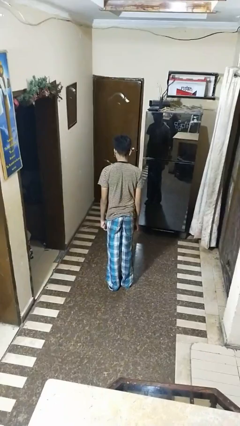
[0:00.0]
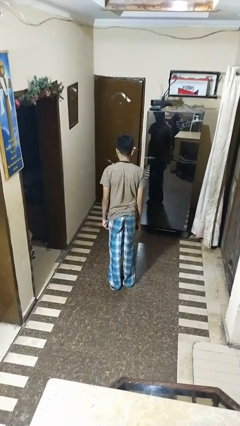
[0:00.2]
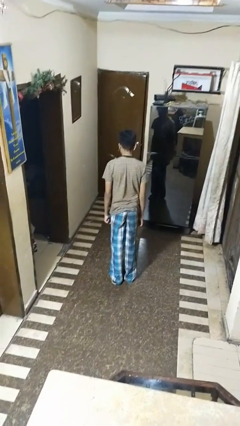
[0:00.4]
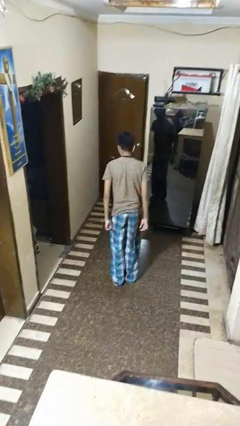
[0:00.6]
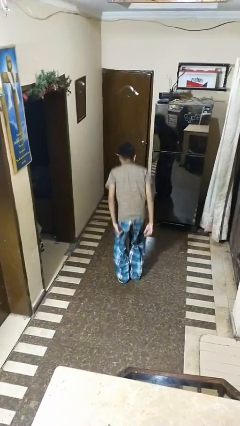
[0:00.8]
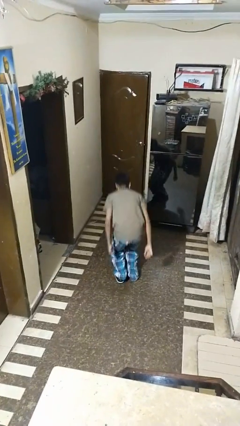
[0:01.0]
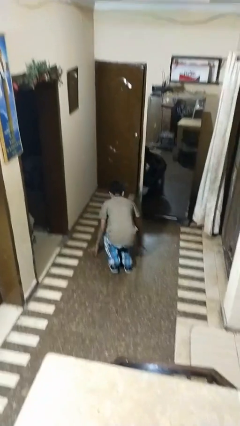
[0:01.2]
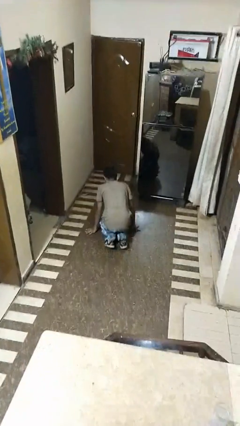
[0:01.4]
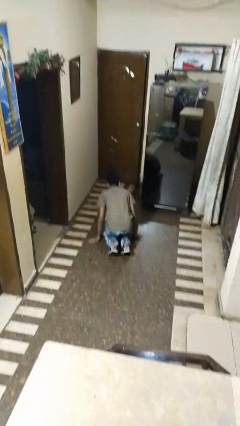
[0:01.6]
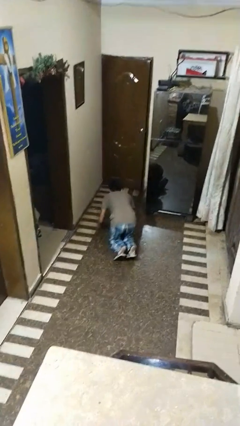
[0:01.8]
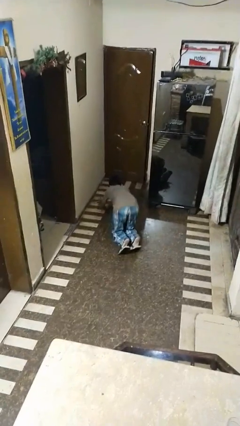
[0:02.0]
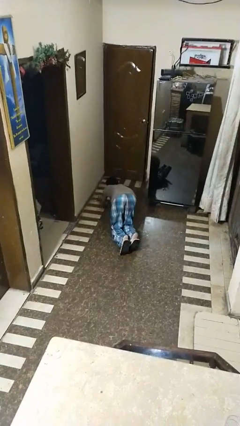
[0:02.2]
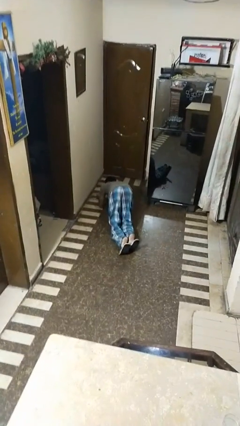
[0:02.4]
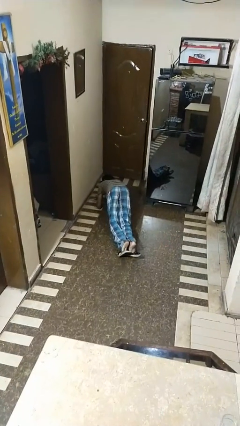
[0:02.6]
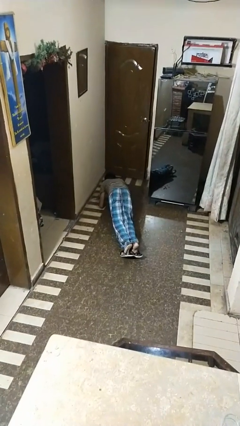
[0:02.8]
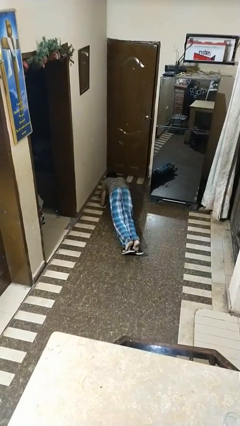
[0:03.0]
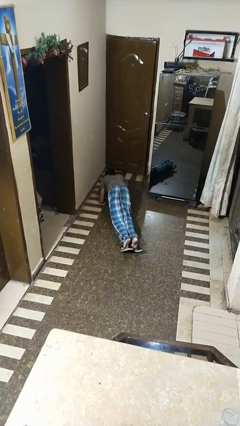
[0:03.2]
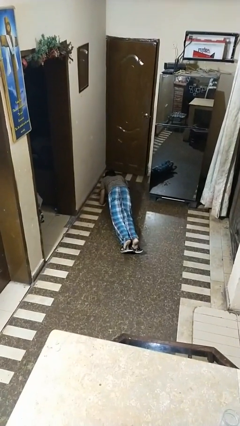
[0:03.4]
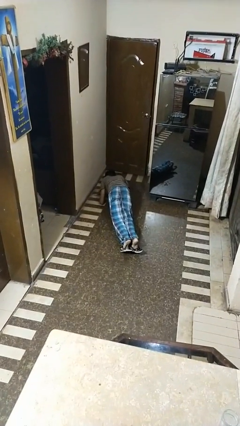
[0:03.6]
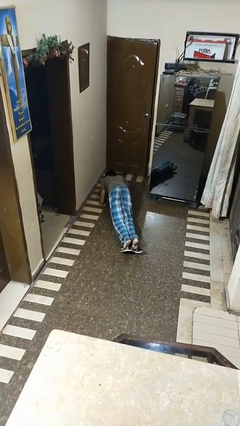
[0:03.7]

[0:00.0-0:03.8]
person exercises with plank

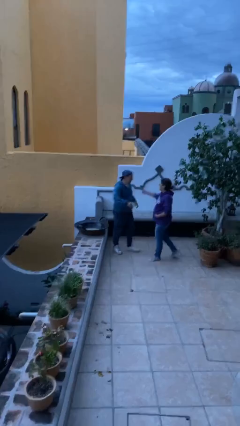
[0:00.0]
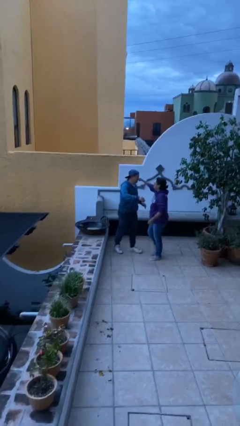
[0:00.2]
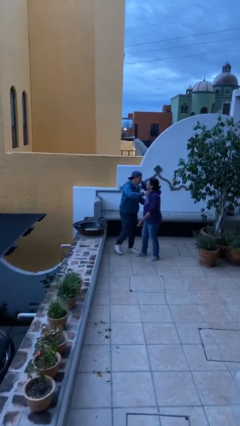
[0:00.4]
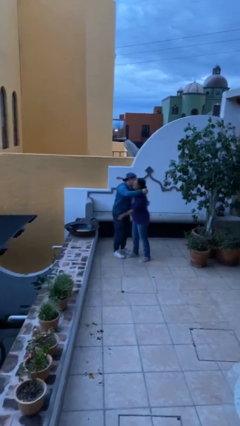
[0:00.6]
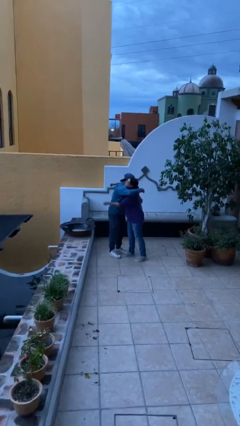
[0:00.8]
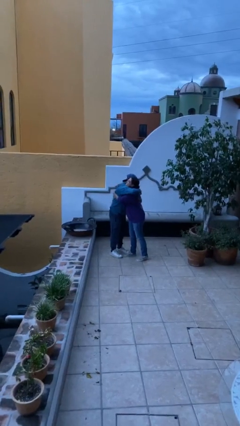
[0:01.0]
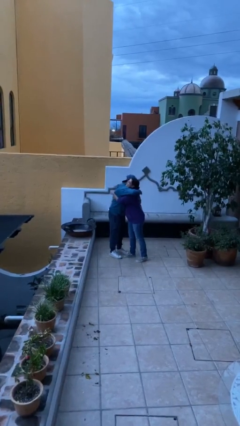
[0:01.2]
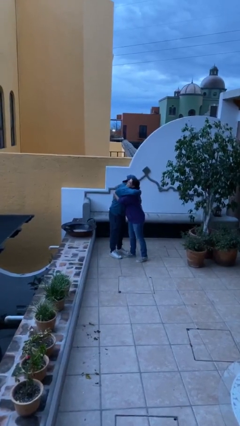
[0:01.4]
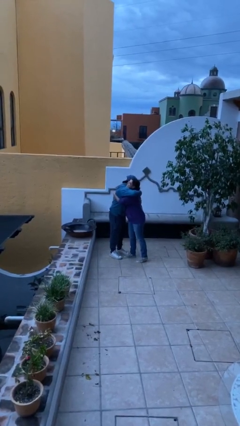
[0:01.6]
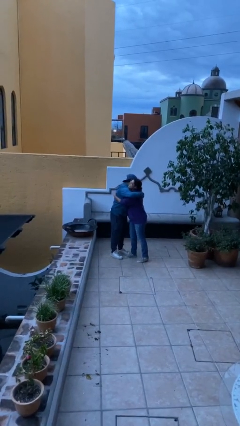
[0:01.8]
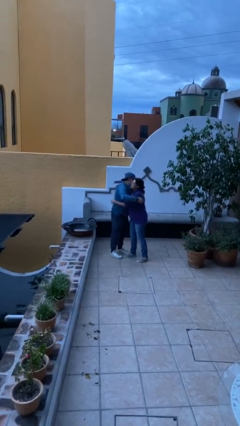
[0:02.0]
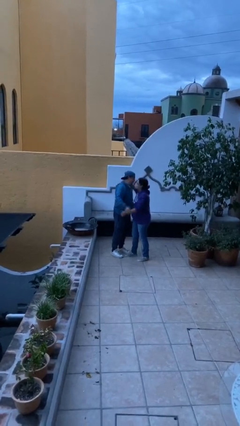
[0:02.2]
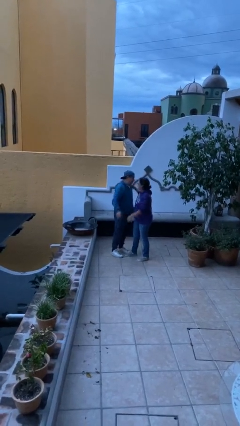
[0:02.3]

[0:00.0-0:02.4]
person embraces person

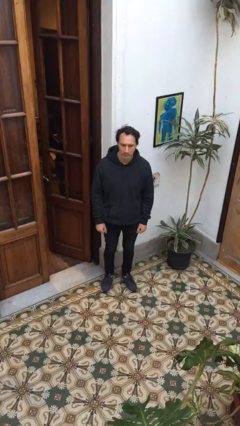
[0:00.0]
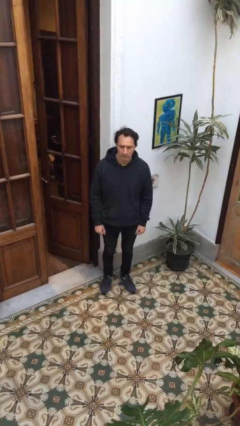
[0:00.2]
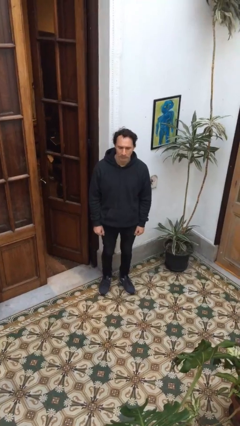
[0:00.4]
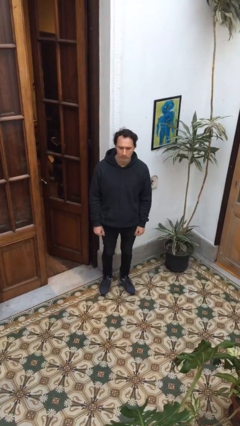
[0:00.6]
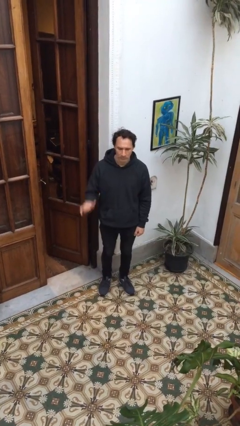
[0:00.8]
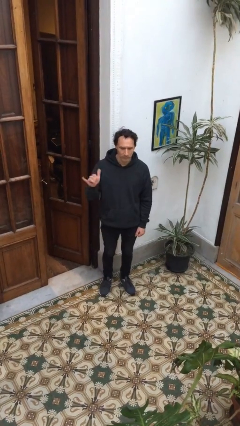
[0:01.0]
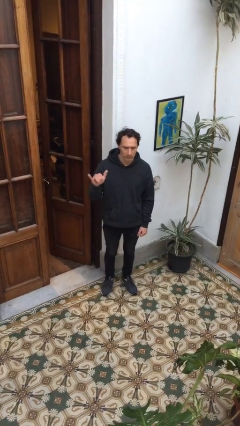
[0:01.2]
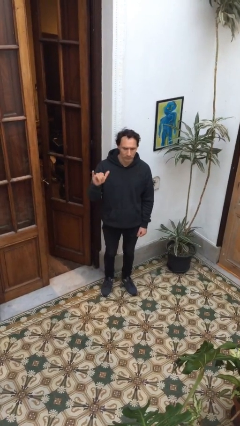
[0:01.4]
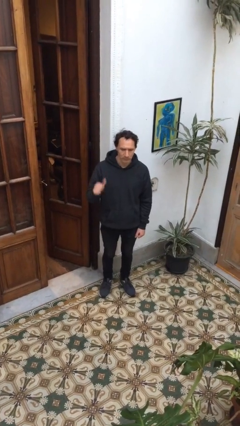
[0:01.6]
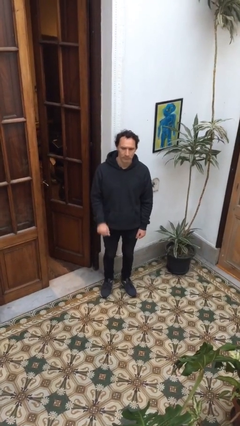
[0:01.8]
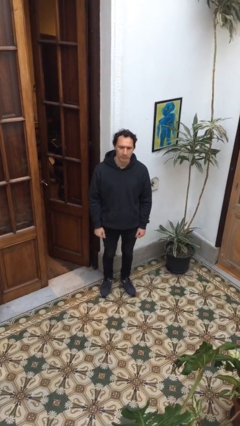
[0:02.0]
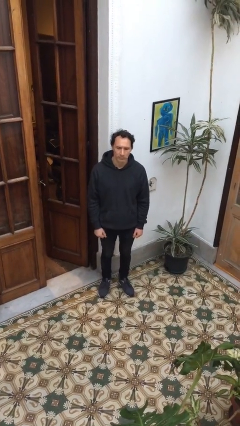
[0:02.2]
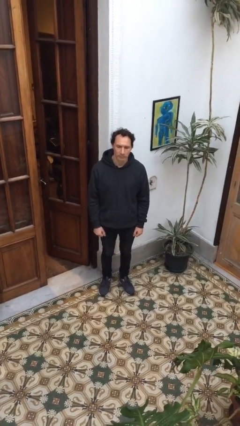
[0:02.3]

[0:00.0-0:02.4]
person gestures hang loose

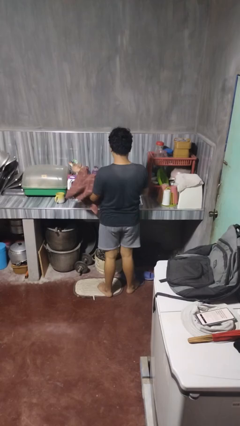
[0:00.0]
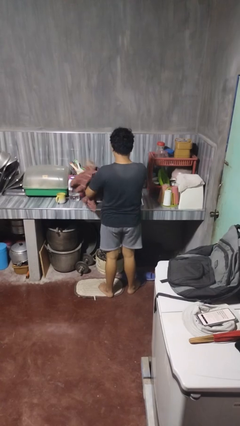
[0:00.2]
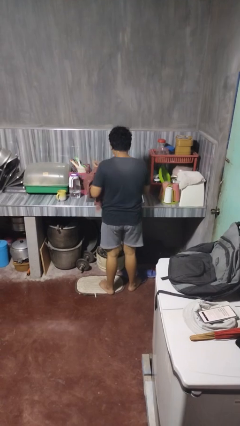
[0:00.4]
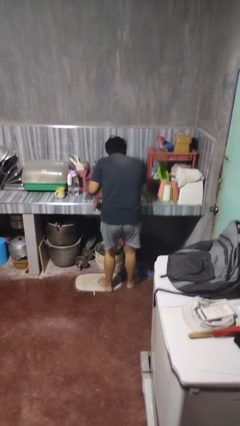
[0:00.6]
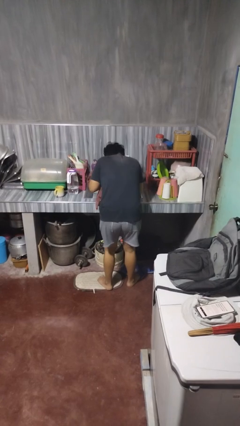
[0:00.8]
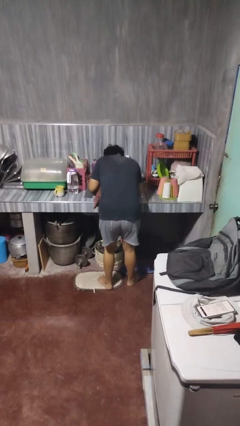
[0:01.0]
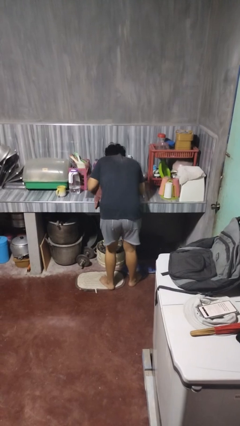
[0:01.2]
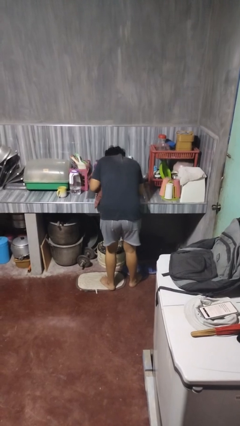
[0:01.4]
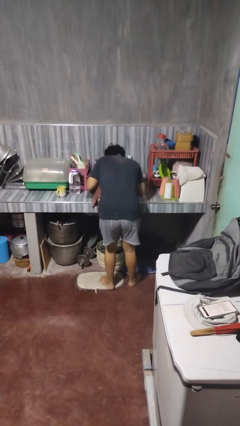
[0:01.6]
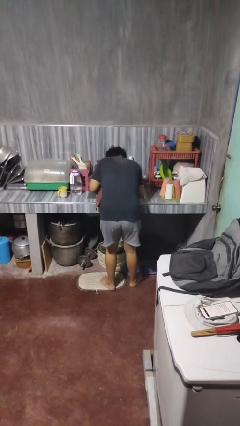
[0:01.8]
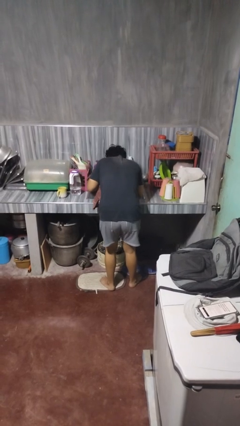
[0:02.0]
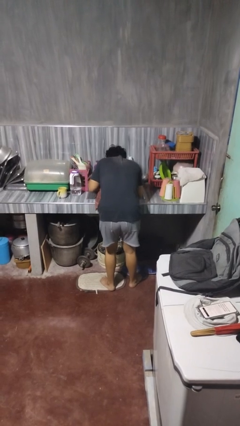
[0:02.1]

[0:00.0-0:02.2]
person washes face

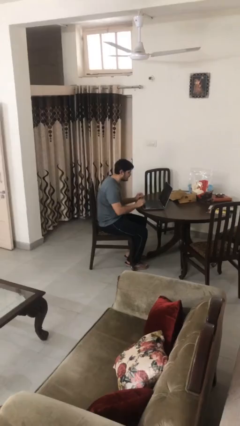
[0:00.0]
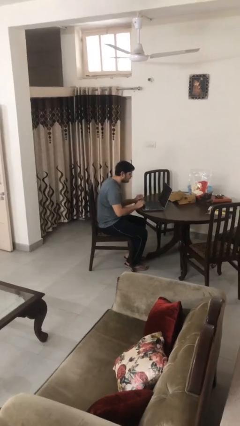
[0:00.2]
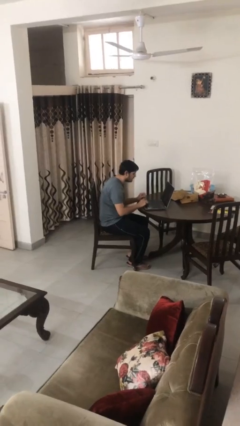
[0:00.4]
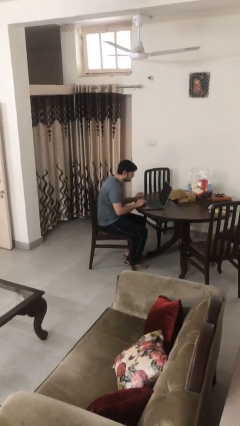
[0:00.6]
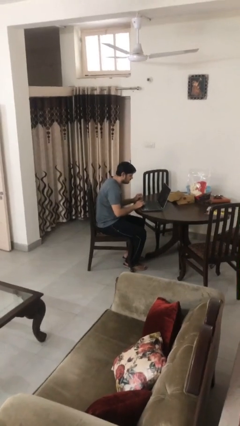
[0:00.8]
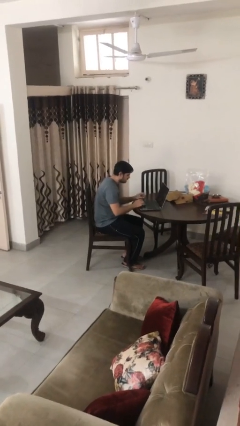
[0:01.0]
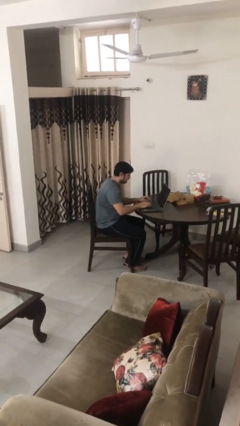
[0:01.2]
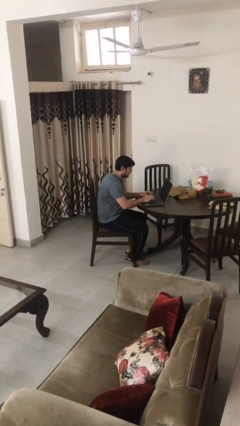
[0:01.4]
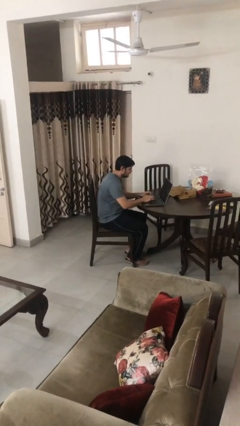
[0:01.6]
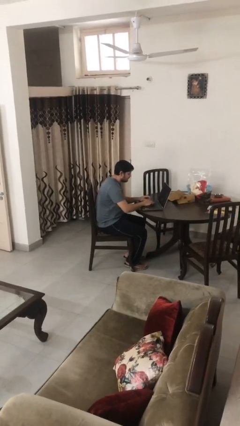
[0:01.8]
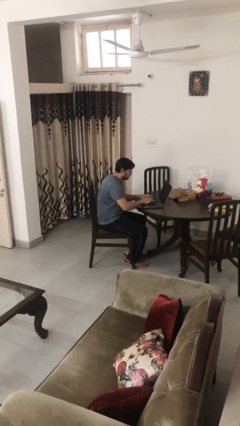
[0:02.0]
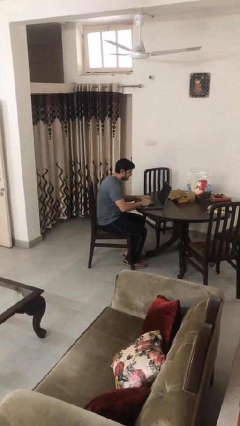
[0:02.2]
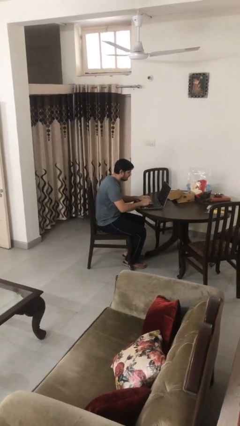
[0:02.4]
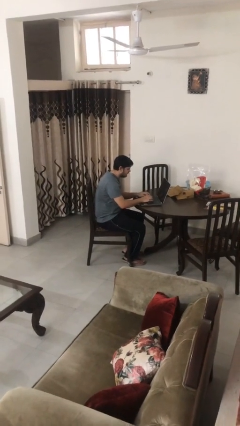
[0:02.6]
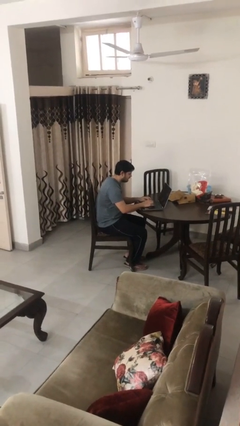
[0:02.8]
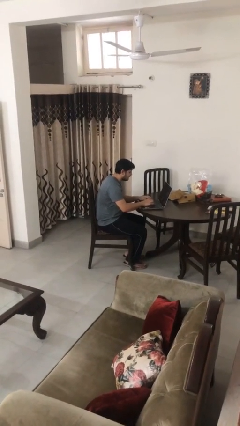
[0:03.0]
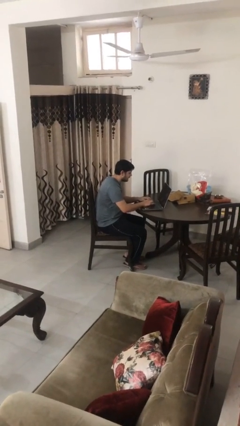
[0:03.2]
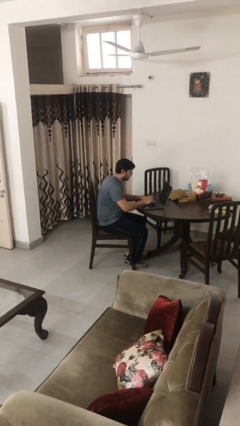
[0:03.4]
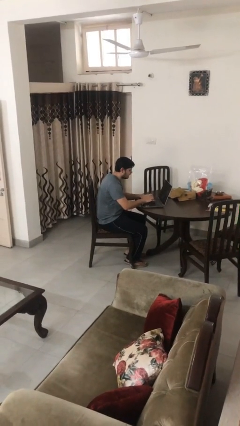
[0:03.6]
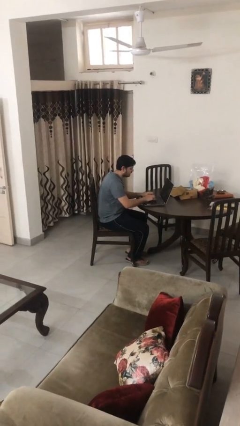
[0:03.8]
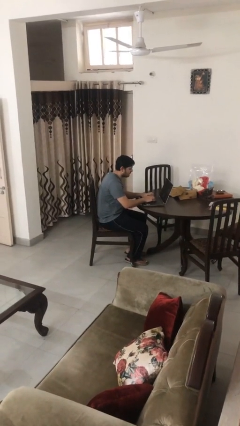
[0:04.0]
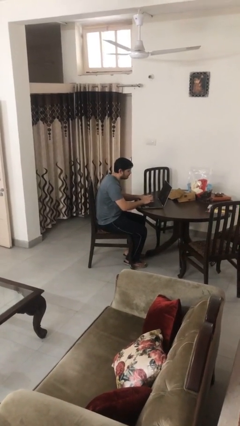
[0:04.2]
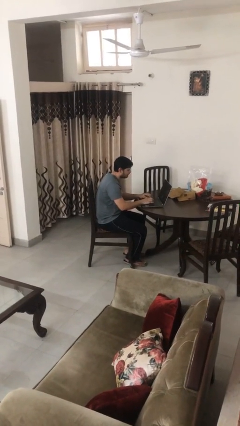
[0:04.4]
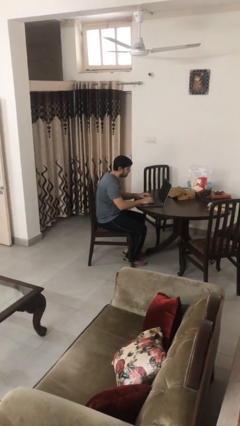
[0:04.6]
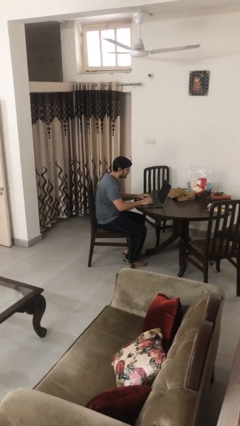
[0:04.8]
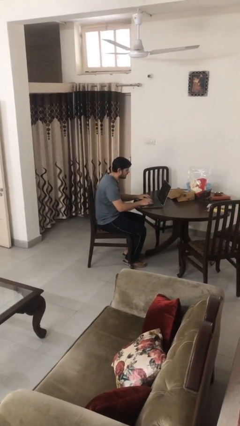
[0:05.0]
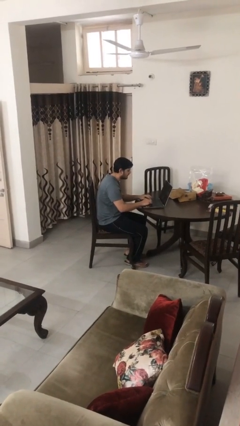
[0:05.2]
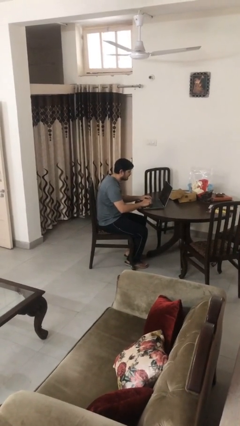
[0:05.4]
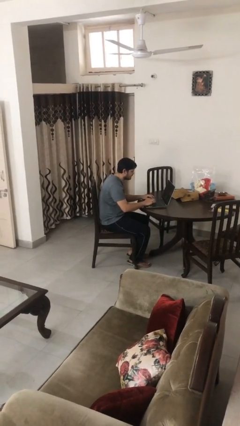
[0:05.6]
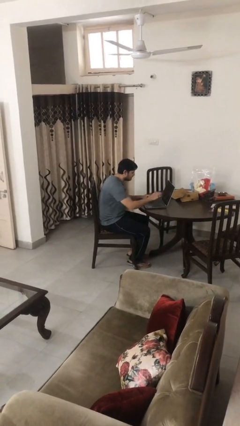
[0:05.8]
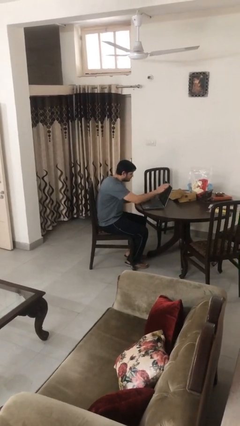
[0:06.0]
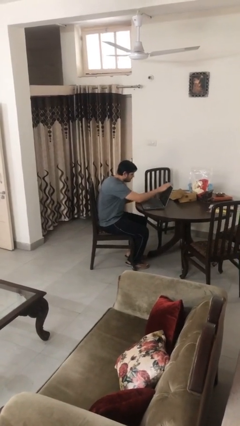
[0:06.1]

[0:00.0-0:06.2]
person interacts with laptop

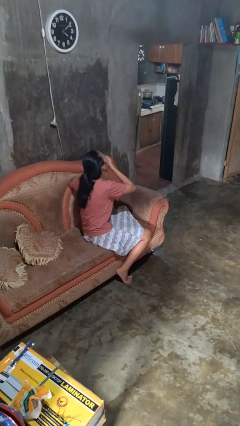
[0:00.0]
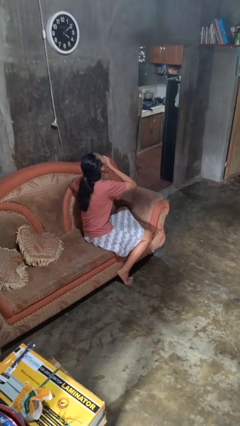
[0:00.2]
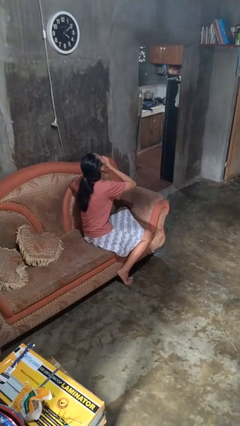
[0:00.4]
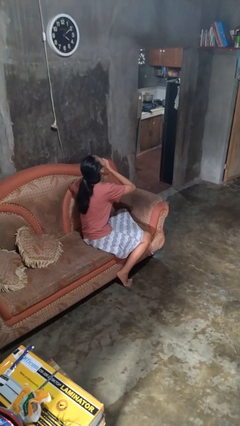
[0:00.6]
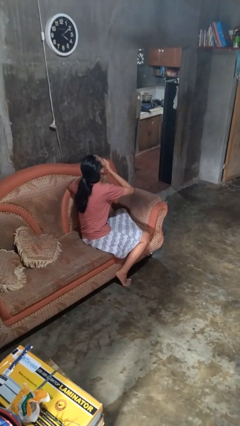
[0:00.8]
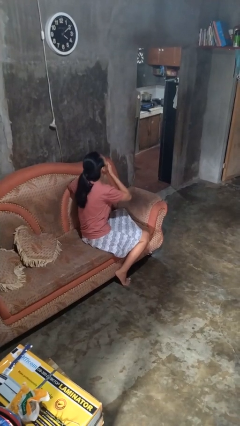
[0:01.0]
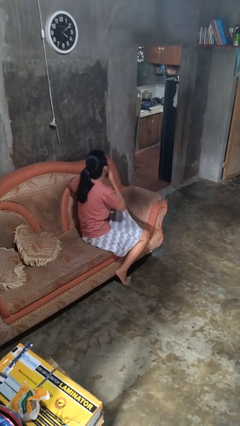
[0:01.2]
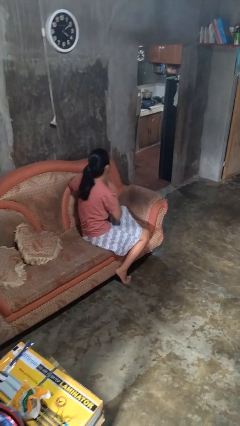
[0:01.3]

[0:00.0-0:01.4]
person yawns
